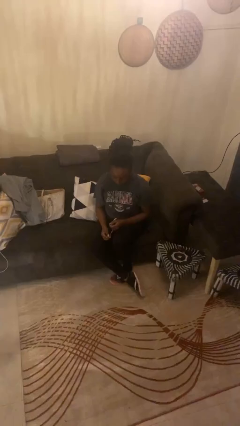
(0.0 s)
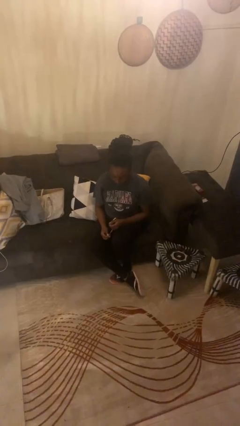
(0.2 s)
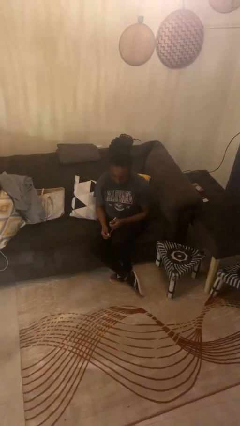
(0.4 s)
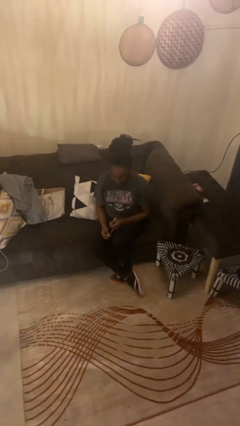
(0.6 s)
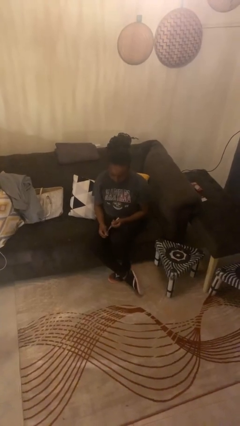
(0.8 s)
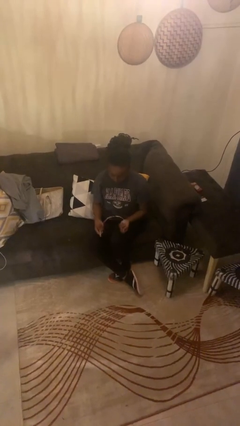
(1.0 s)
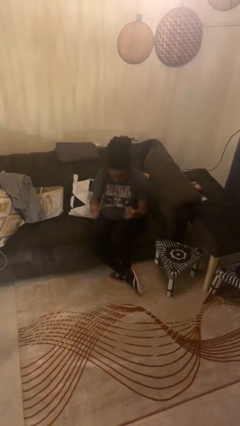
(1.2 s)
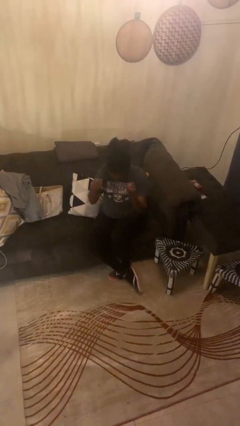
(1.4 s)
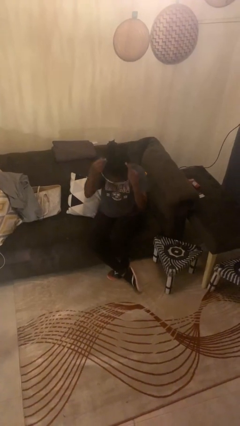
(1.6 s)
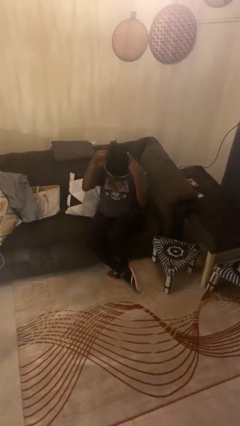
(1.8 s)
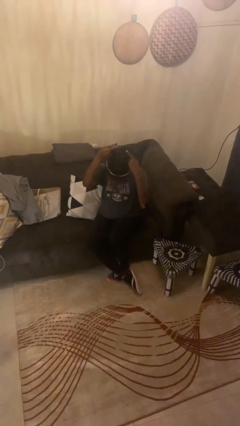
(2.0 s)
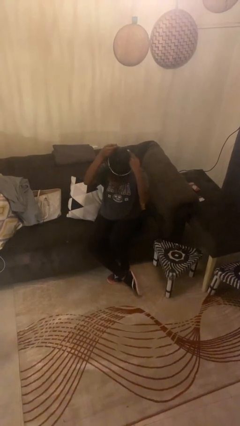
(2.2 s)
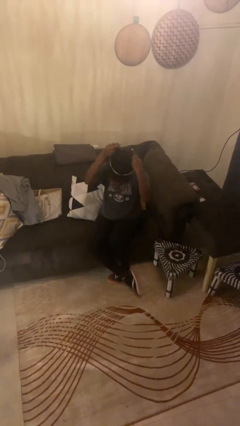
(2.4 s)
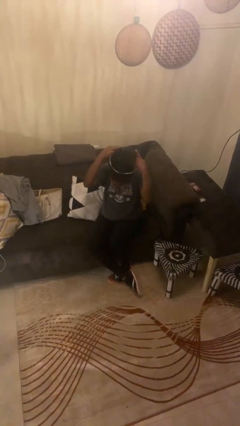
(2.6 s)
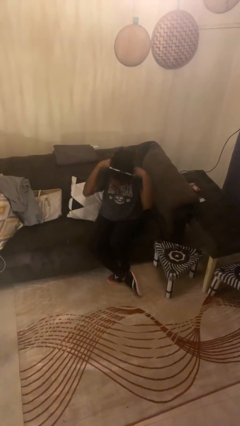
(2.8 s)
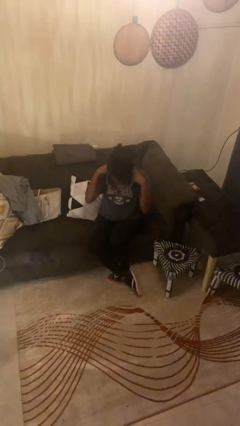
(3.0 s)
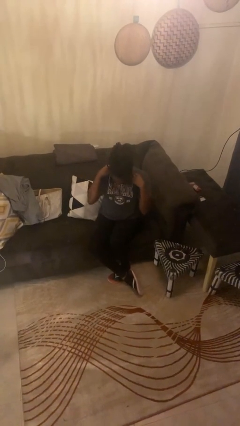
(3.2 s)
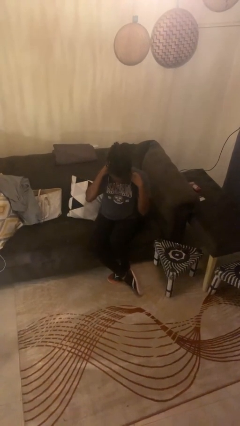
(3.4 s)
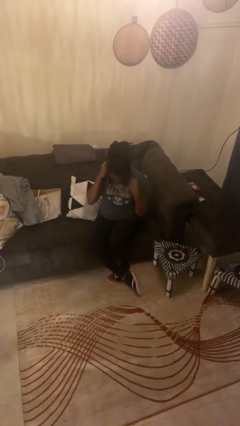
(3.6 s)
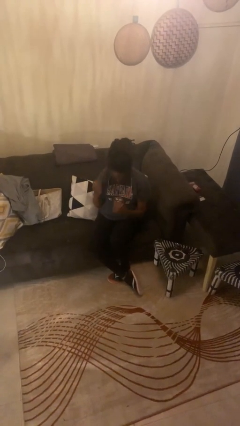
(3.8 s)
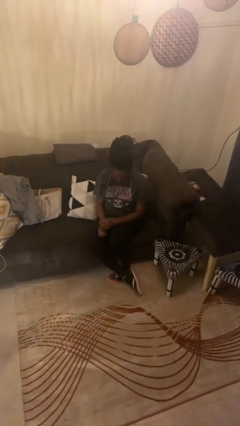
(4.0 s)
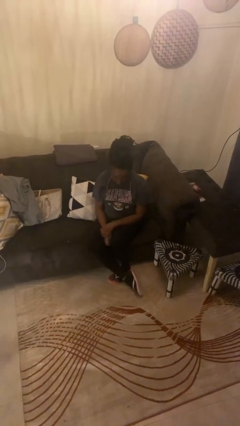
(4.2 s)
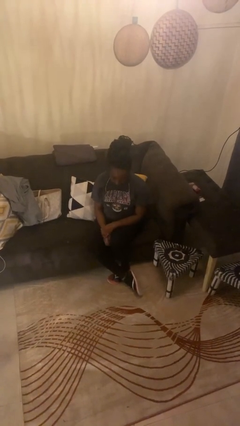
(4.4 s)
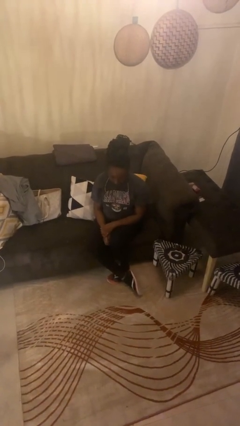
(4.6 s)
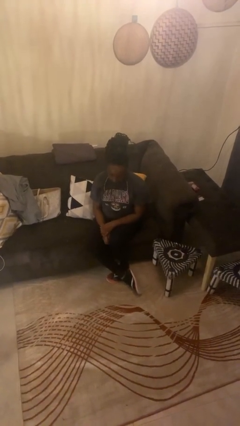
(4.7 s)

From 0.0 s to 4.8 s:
person puts on necklace

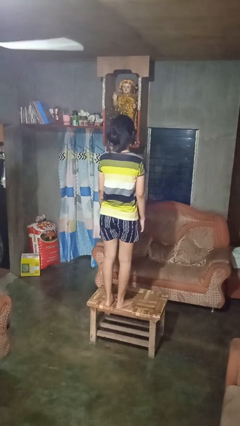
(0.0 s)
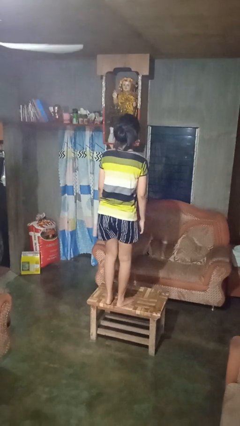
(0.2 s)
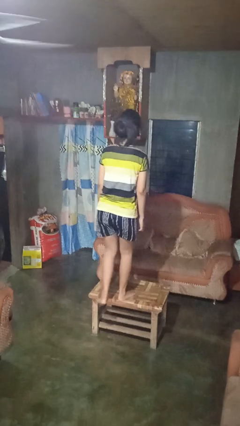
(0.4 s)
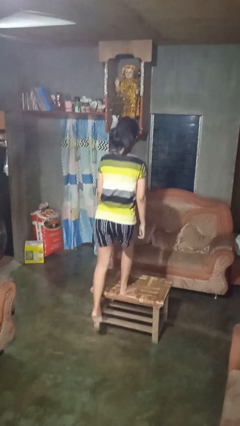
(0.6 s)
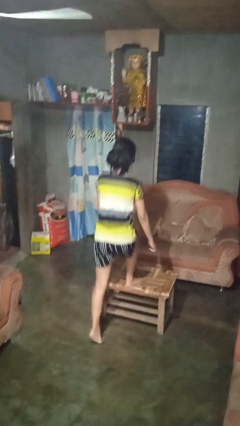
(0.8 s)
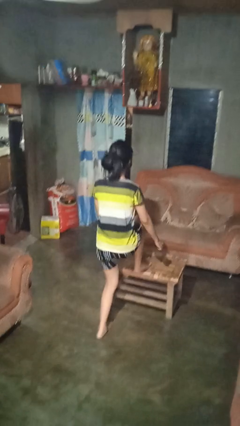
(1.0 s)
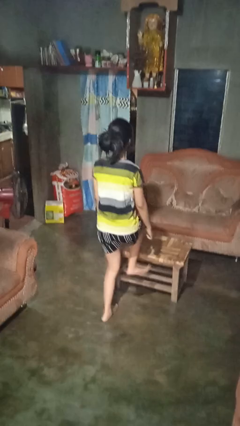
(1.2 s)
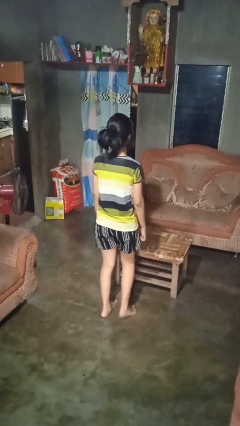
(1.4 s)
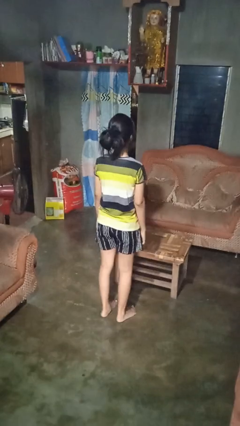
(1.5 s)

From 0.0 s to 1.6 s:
person climbs off table

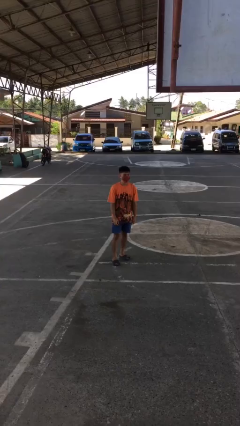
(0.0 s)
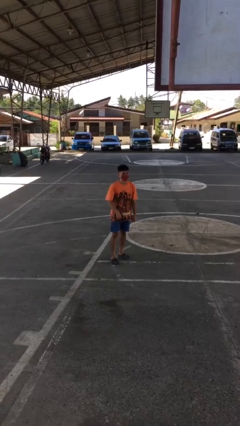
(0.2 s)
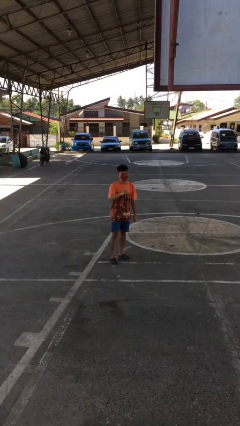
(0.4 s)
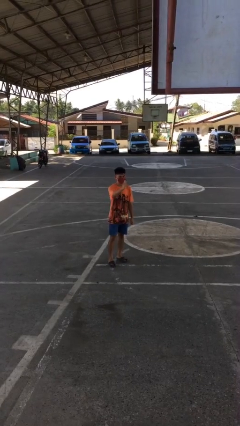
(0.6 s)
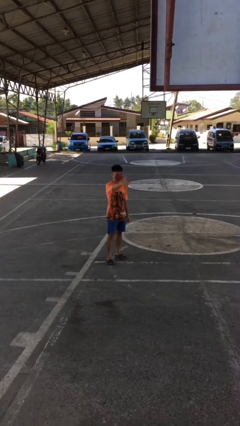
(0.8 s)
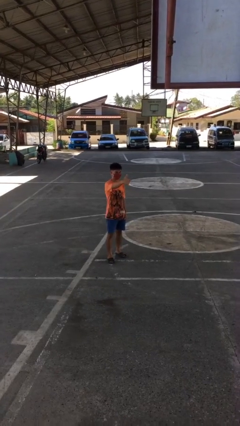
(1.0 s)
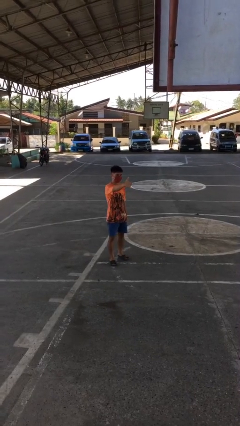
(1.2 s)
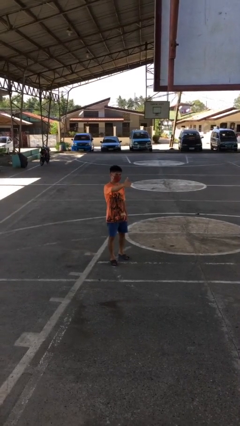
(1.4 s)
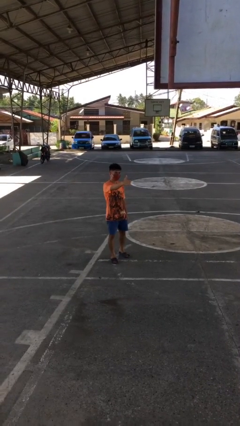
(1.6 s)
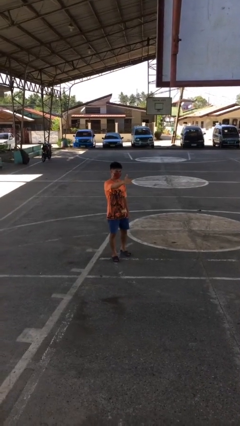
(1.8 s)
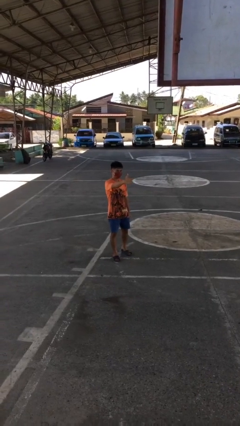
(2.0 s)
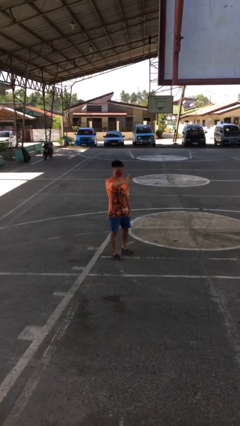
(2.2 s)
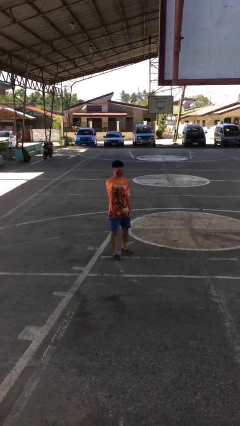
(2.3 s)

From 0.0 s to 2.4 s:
person gestures thumbs up

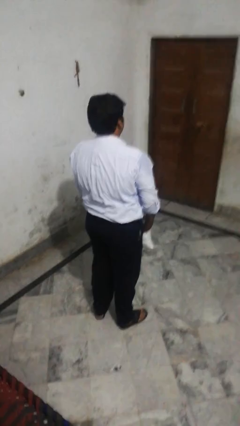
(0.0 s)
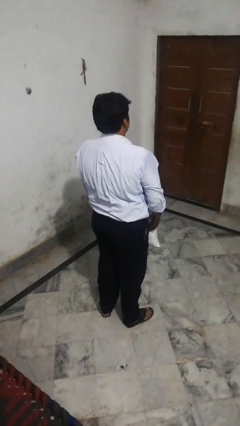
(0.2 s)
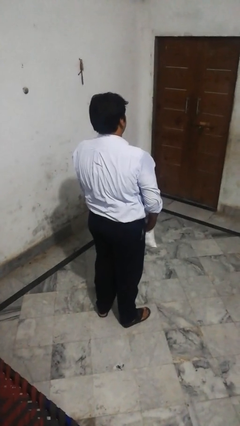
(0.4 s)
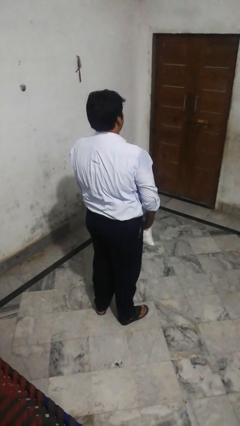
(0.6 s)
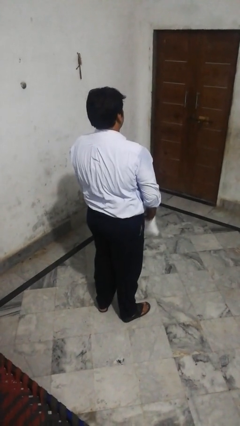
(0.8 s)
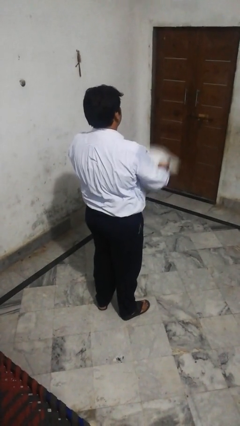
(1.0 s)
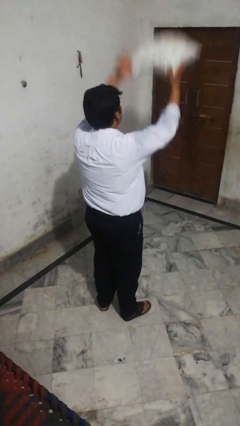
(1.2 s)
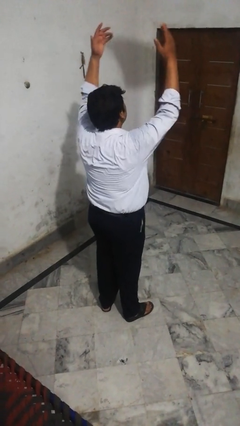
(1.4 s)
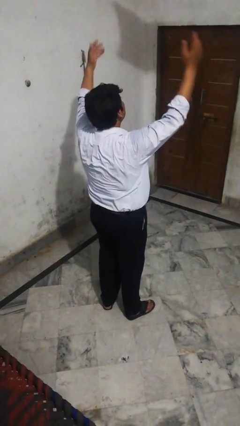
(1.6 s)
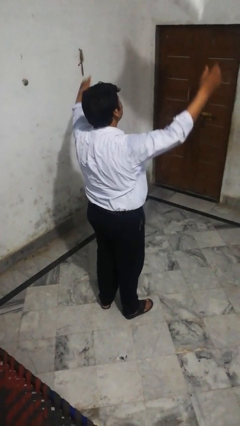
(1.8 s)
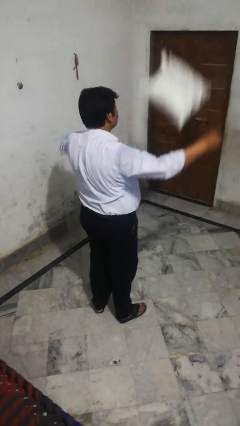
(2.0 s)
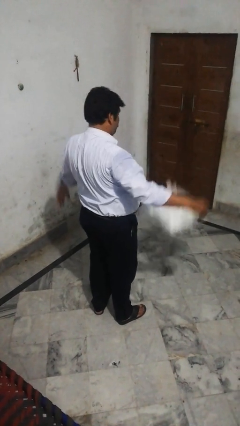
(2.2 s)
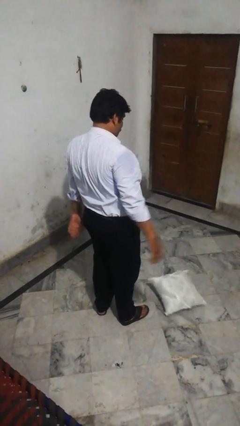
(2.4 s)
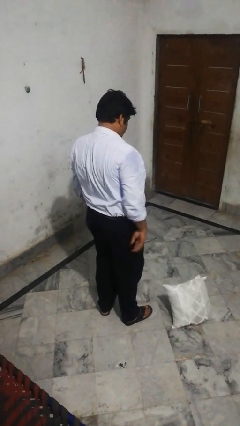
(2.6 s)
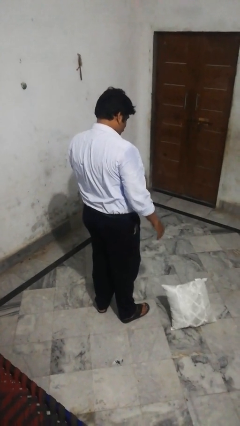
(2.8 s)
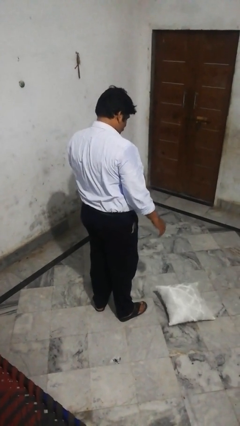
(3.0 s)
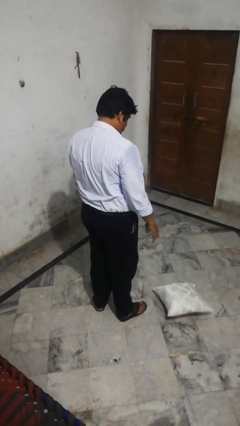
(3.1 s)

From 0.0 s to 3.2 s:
person throws object into air

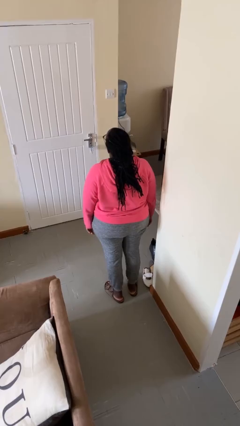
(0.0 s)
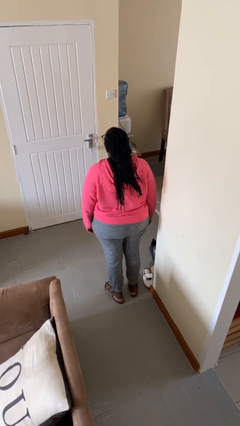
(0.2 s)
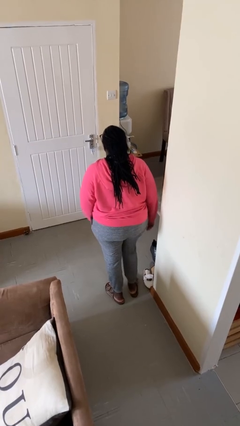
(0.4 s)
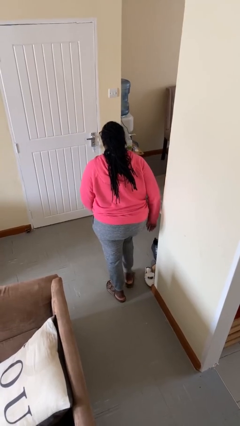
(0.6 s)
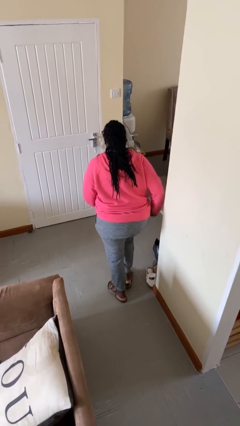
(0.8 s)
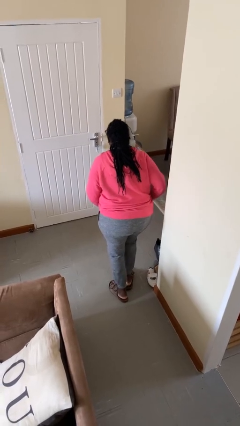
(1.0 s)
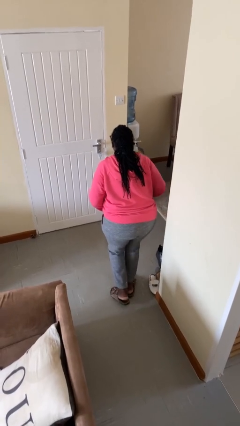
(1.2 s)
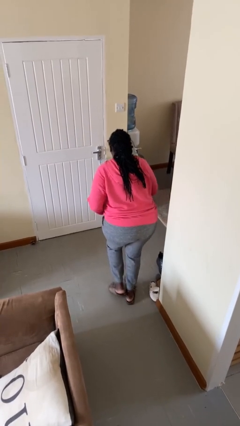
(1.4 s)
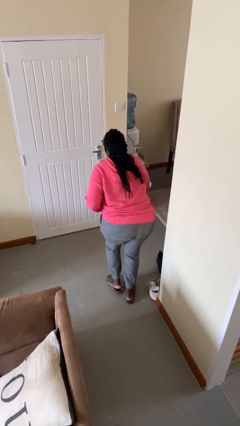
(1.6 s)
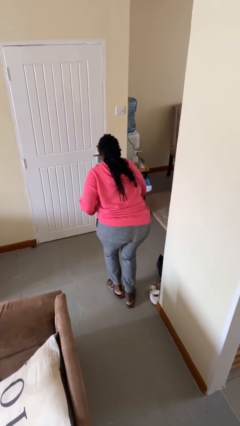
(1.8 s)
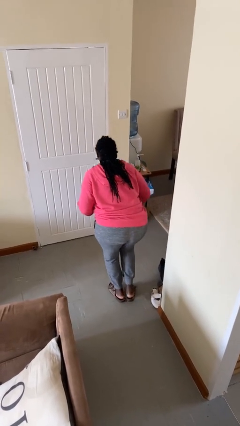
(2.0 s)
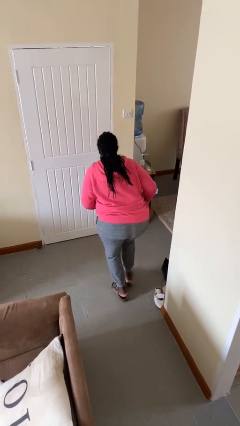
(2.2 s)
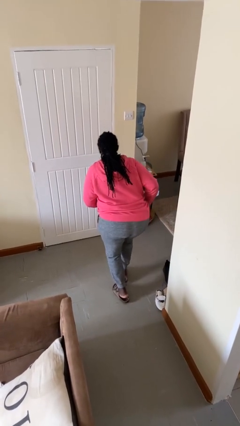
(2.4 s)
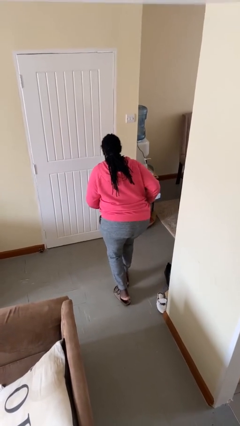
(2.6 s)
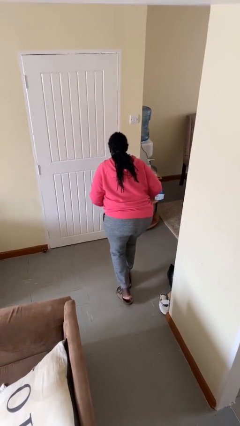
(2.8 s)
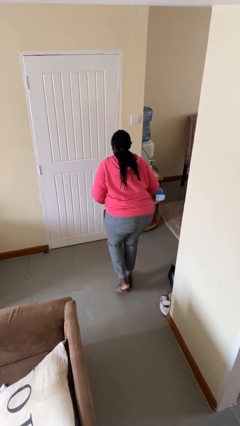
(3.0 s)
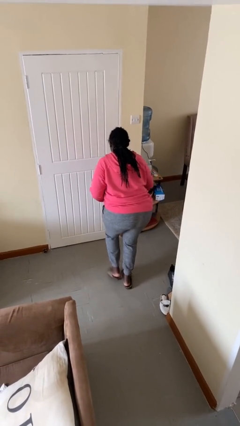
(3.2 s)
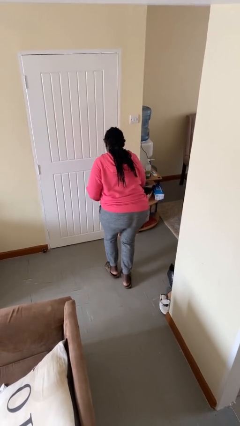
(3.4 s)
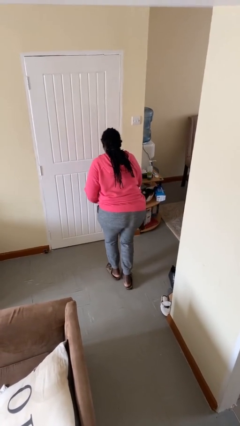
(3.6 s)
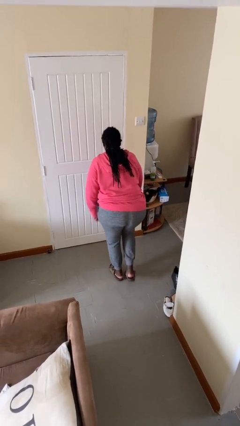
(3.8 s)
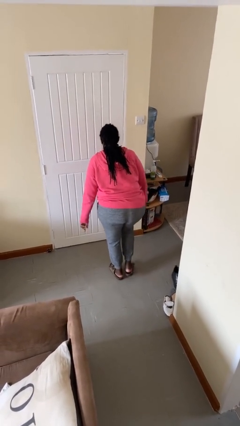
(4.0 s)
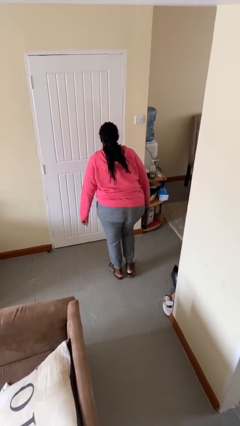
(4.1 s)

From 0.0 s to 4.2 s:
person walks tiptoe

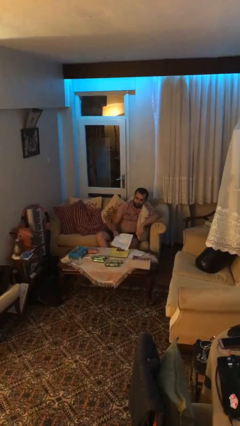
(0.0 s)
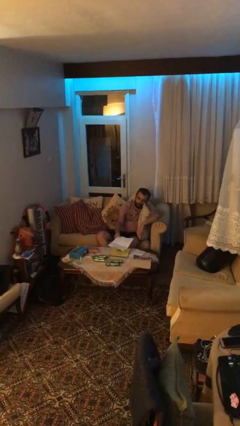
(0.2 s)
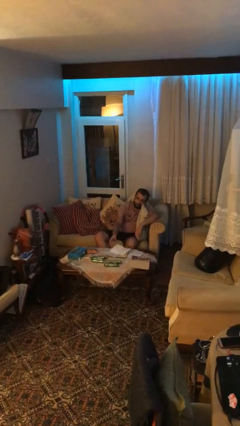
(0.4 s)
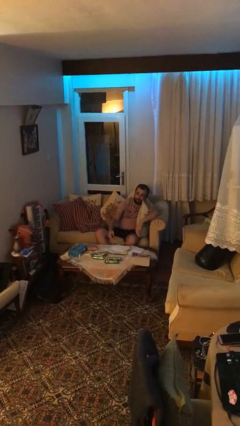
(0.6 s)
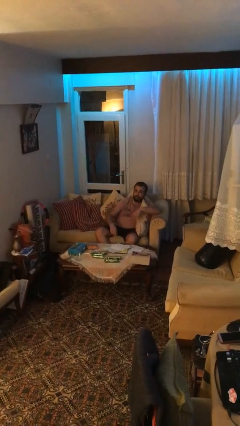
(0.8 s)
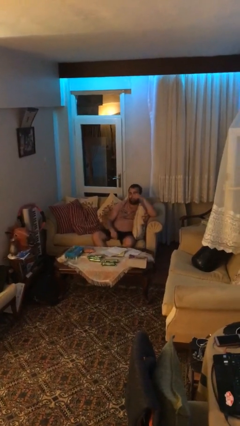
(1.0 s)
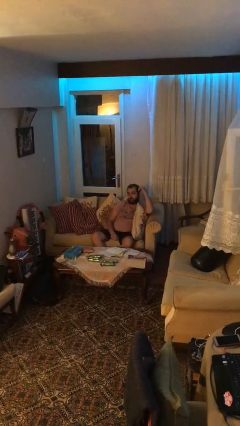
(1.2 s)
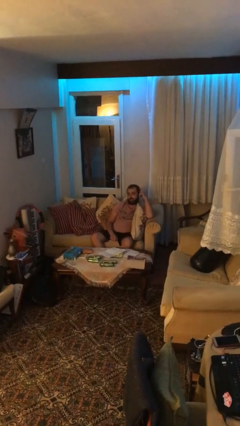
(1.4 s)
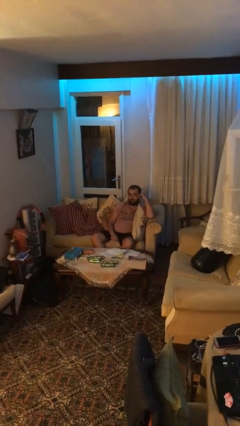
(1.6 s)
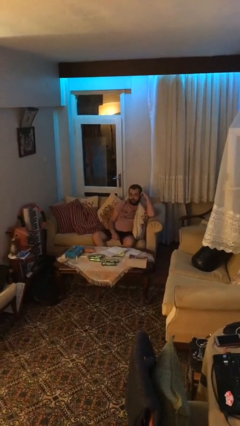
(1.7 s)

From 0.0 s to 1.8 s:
person puts down object on table
